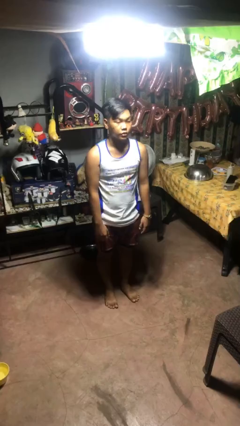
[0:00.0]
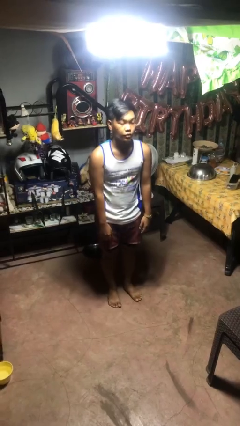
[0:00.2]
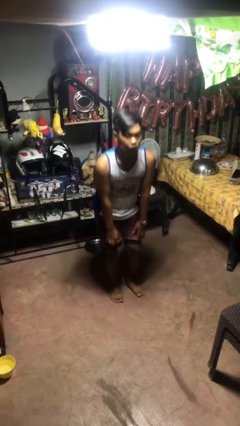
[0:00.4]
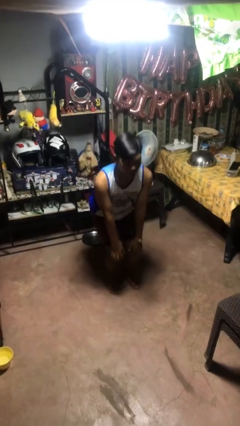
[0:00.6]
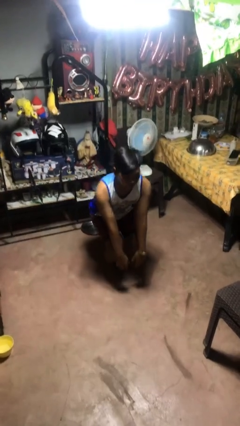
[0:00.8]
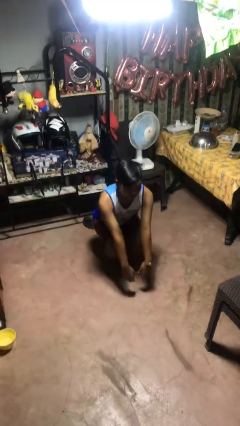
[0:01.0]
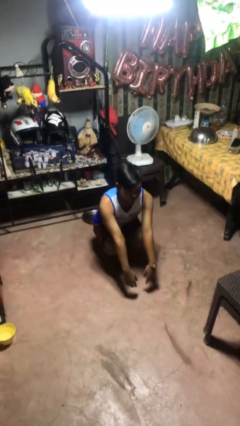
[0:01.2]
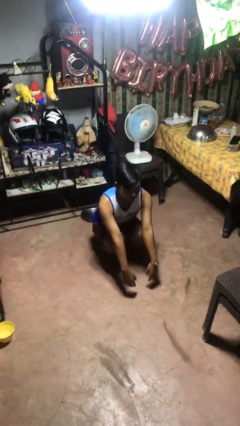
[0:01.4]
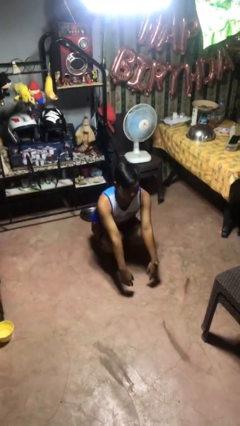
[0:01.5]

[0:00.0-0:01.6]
person squats

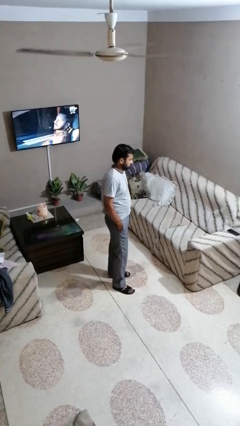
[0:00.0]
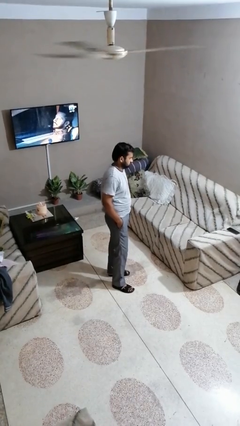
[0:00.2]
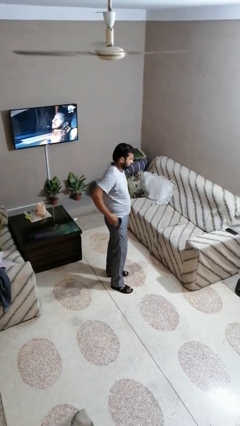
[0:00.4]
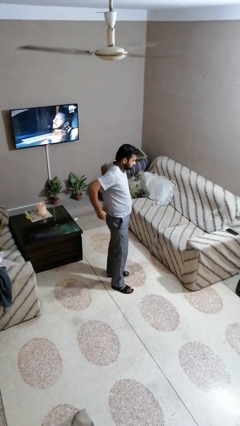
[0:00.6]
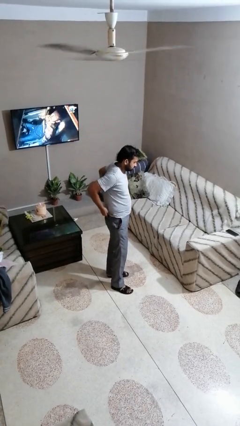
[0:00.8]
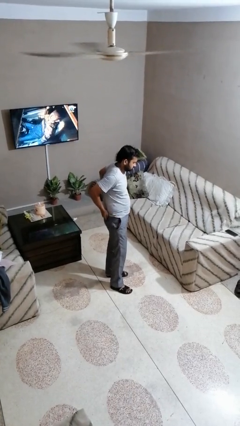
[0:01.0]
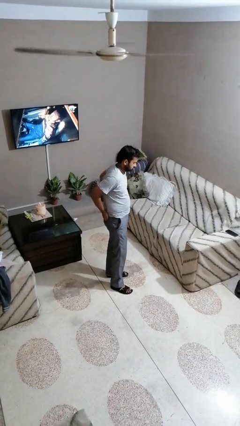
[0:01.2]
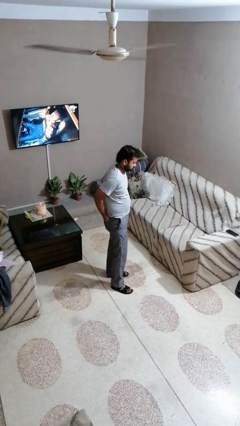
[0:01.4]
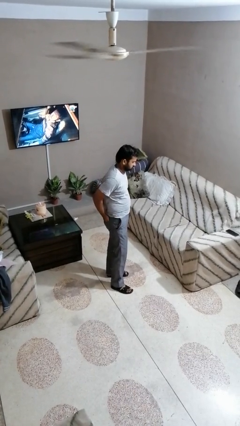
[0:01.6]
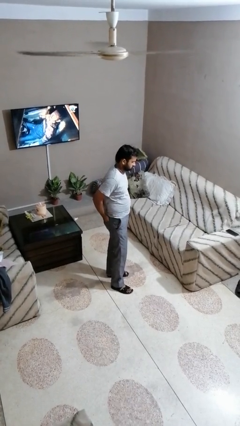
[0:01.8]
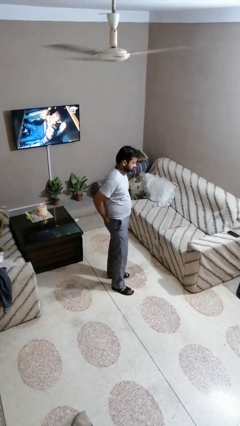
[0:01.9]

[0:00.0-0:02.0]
person puts hands in back pockets

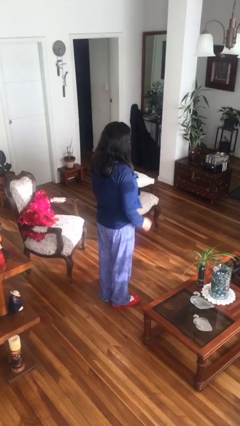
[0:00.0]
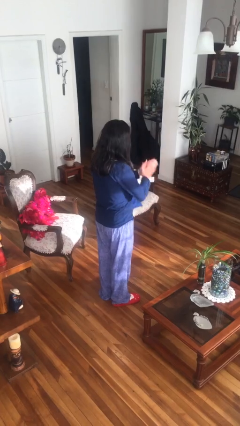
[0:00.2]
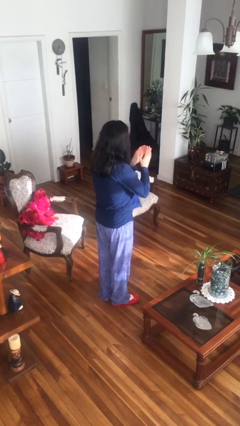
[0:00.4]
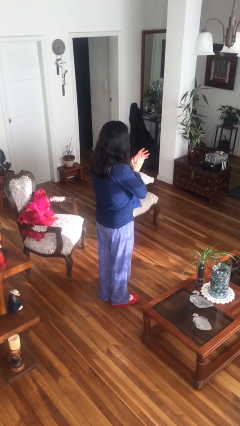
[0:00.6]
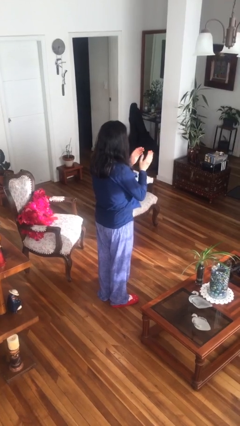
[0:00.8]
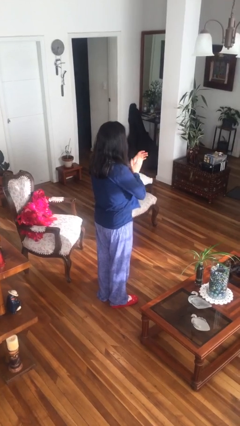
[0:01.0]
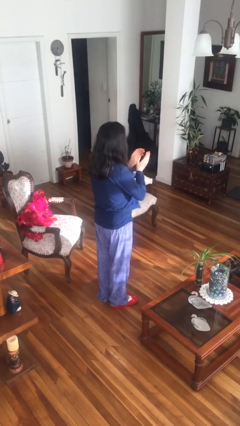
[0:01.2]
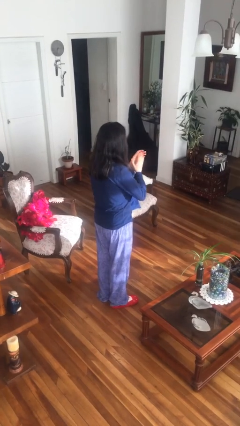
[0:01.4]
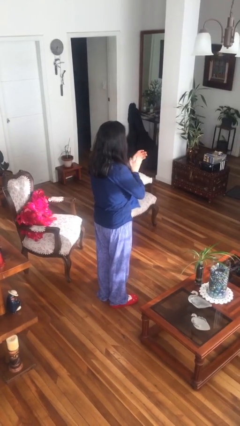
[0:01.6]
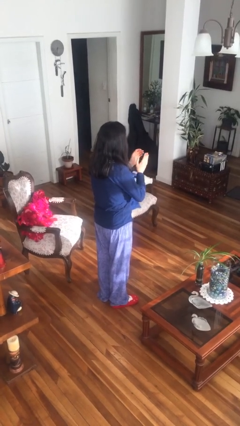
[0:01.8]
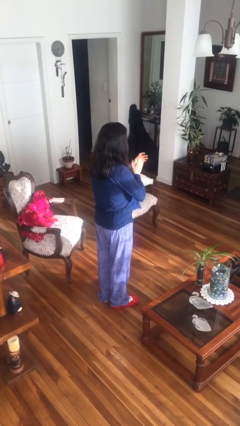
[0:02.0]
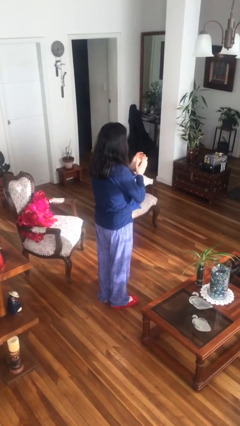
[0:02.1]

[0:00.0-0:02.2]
person claps hands

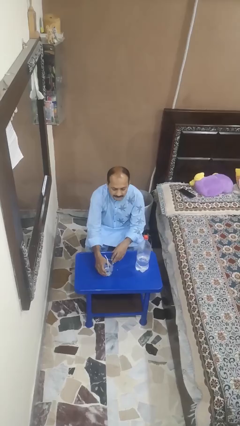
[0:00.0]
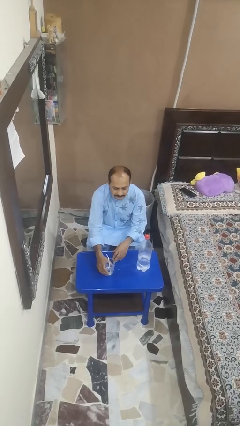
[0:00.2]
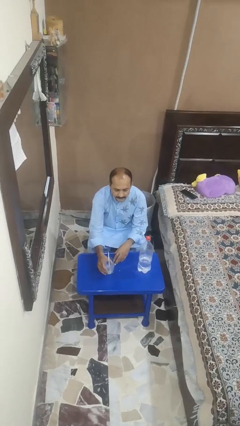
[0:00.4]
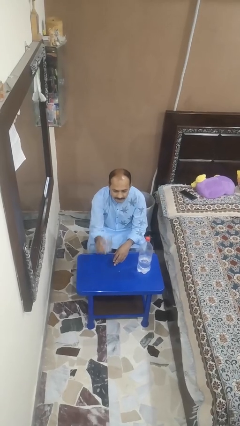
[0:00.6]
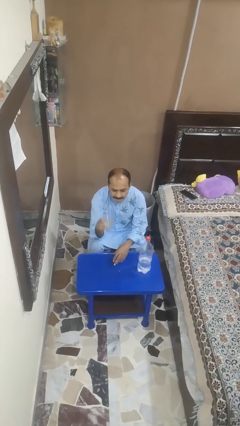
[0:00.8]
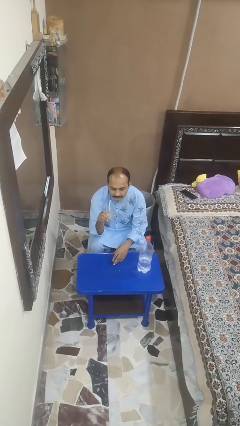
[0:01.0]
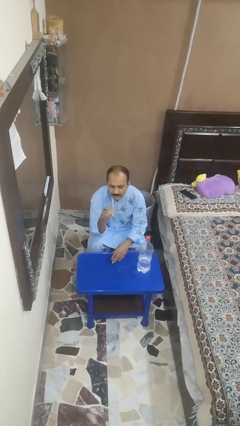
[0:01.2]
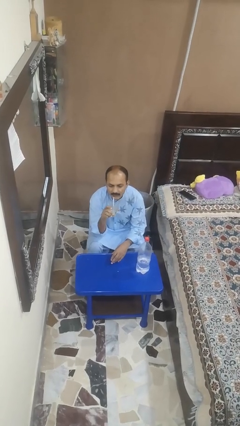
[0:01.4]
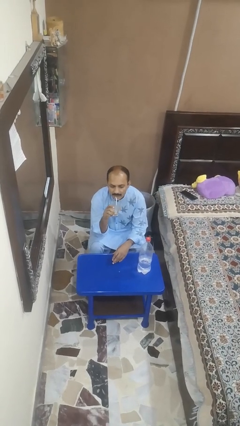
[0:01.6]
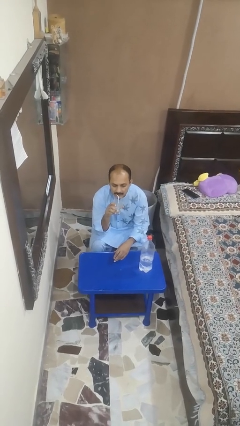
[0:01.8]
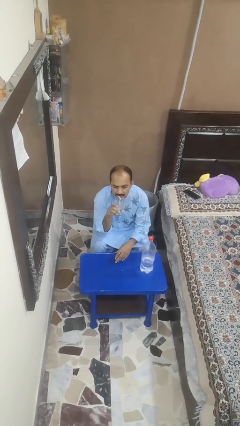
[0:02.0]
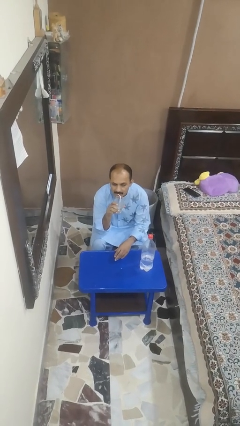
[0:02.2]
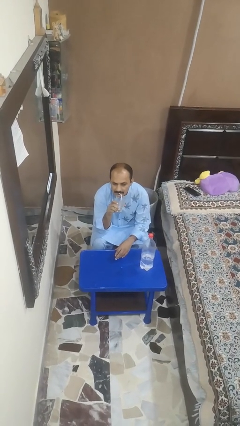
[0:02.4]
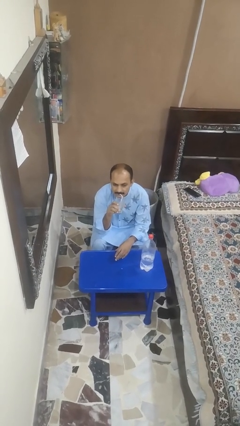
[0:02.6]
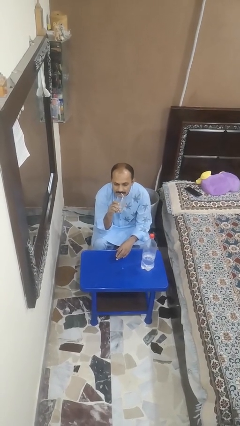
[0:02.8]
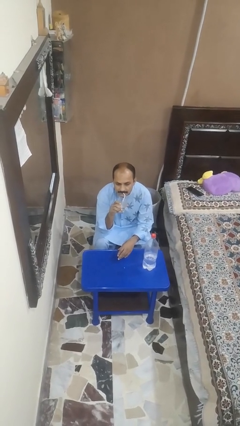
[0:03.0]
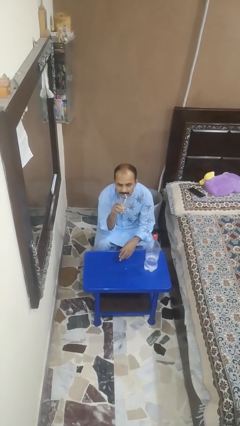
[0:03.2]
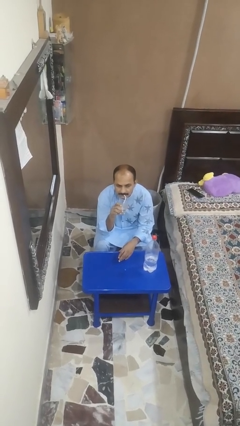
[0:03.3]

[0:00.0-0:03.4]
person drinks from straw

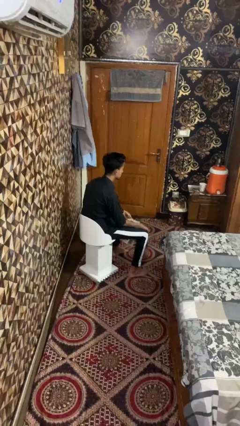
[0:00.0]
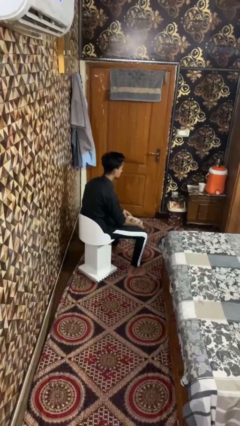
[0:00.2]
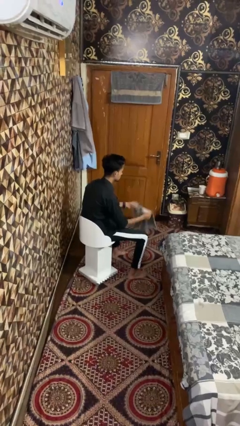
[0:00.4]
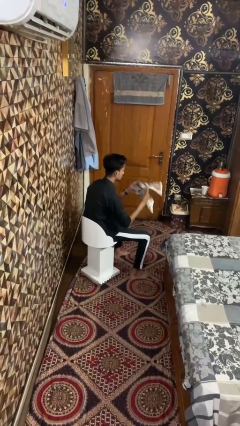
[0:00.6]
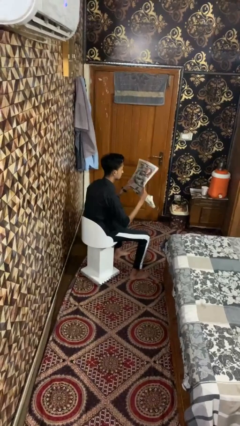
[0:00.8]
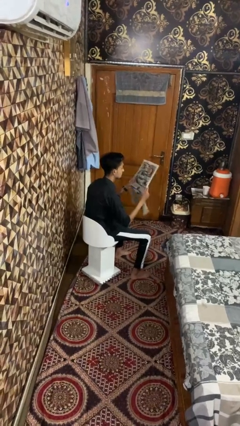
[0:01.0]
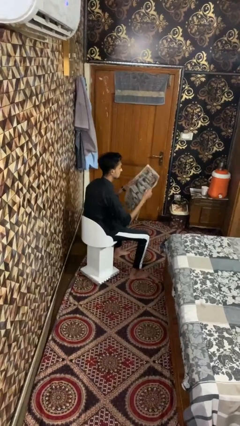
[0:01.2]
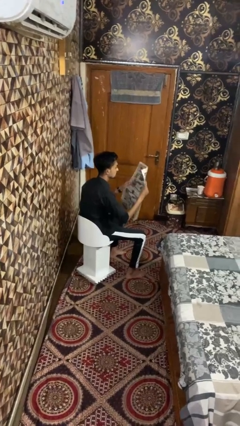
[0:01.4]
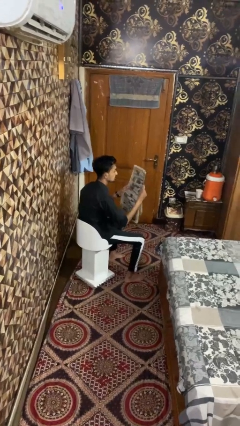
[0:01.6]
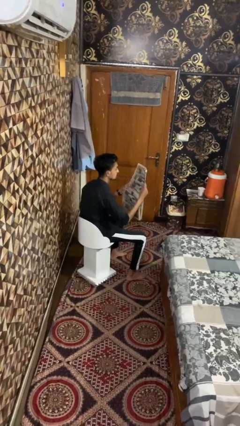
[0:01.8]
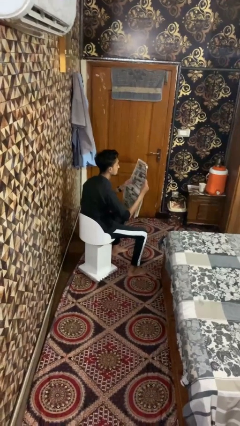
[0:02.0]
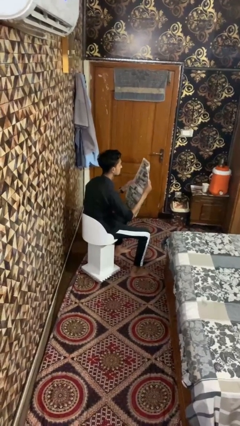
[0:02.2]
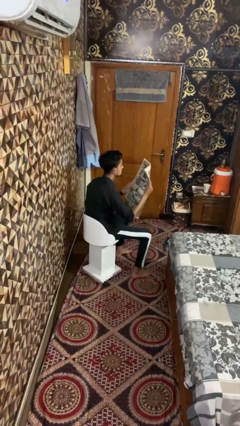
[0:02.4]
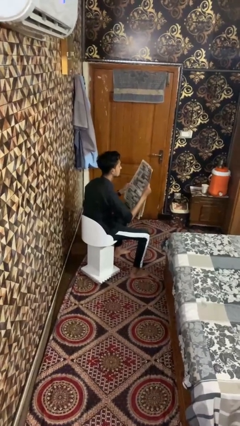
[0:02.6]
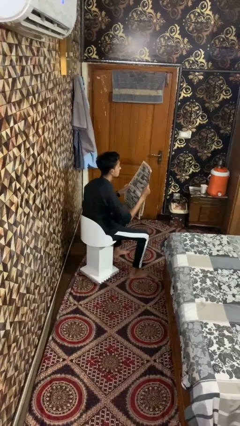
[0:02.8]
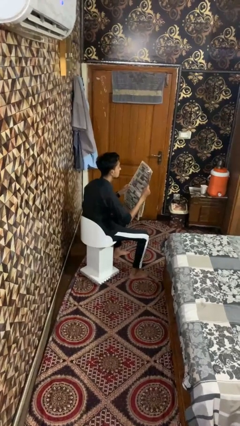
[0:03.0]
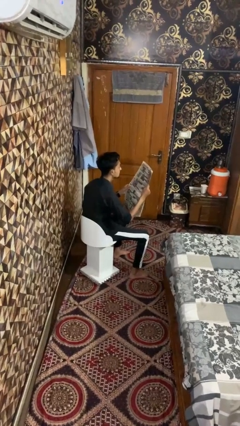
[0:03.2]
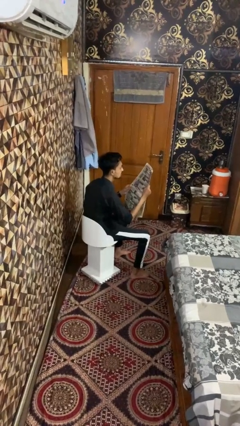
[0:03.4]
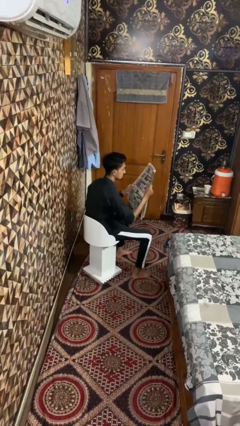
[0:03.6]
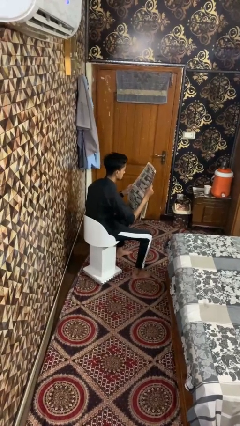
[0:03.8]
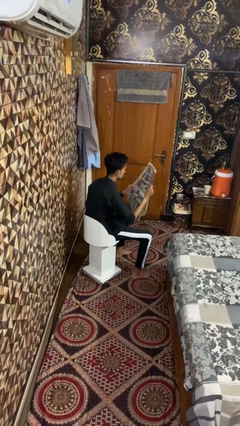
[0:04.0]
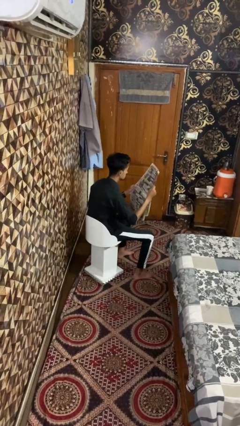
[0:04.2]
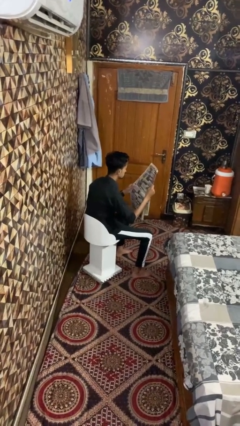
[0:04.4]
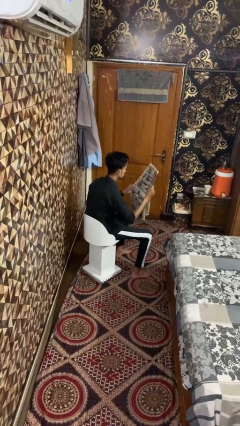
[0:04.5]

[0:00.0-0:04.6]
person reads newspaper

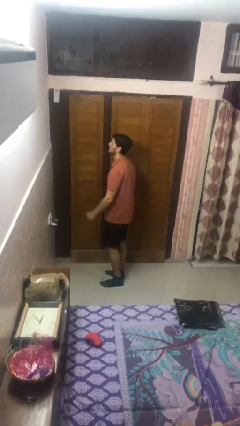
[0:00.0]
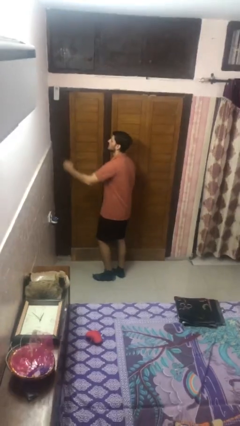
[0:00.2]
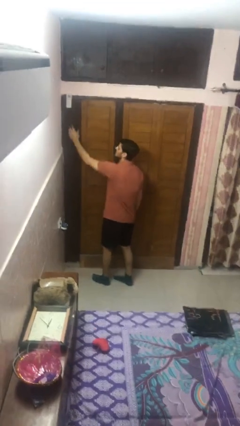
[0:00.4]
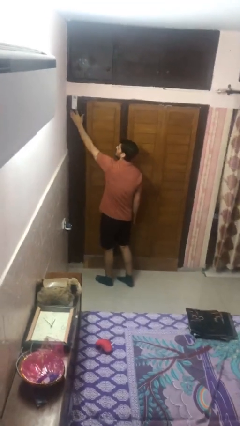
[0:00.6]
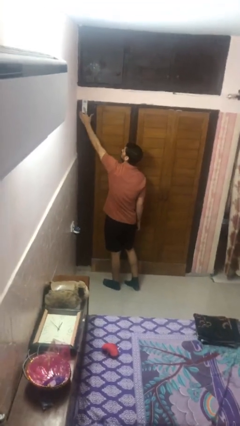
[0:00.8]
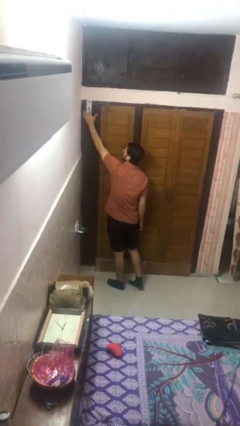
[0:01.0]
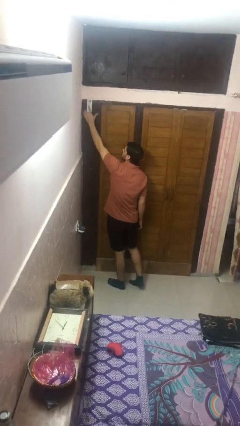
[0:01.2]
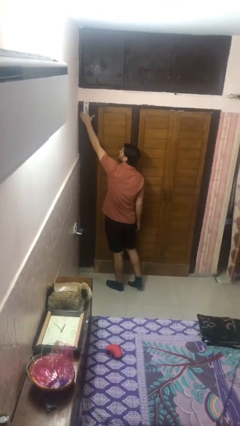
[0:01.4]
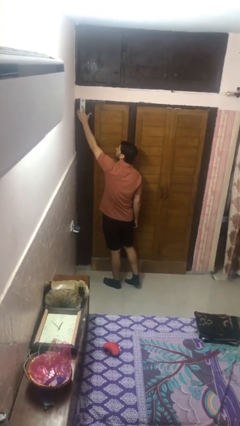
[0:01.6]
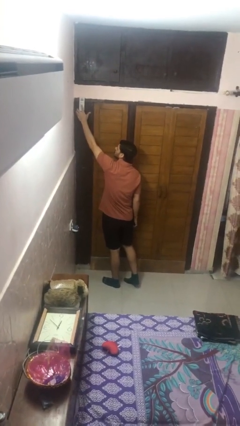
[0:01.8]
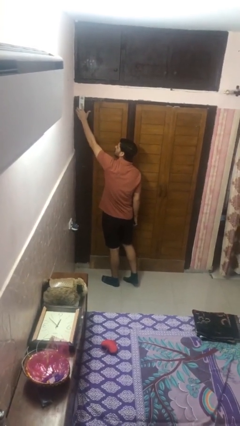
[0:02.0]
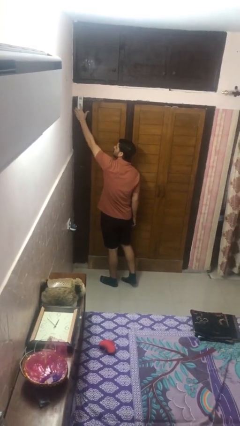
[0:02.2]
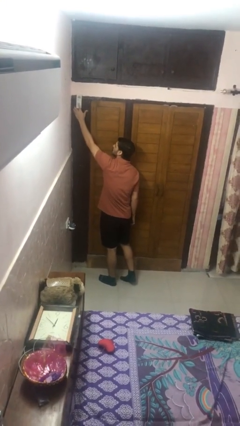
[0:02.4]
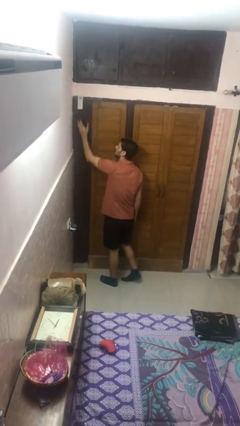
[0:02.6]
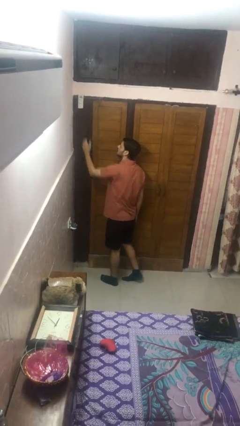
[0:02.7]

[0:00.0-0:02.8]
person adjusts thermostat

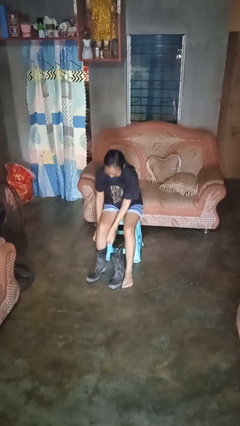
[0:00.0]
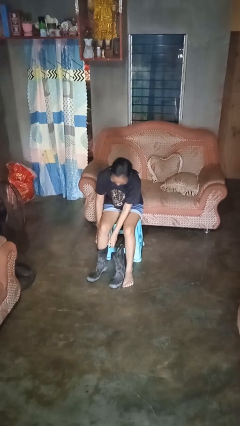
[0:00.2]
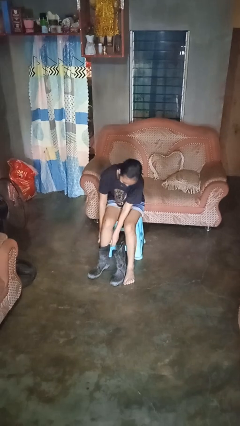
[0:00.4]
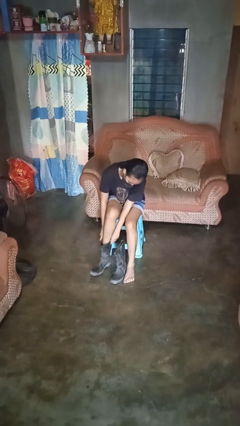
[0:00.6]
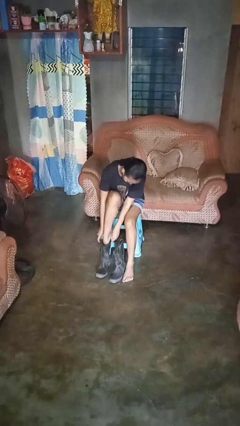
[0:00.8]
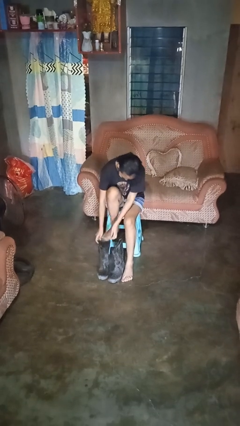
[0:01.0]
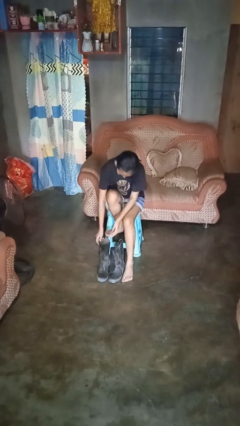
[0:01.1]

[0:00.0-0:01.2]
person takes off boots
